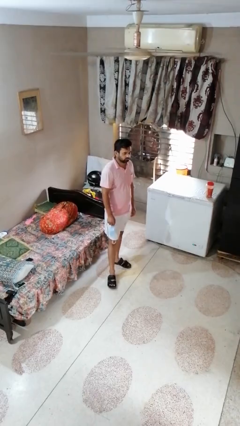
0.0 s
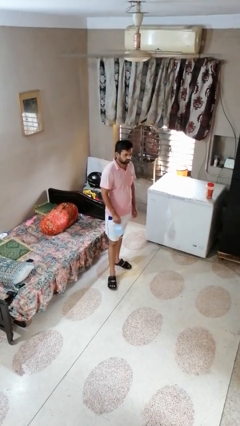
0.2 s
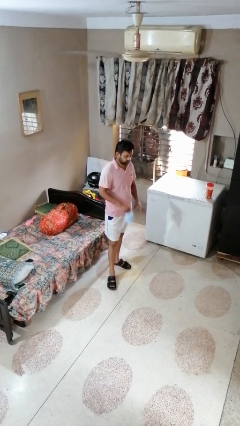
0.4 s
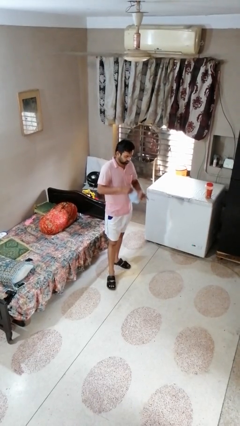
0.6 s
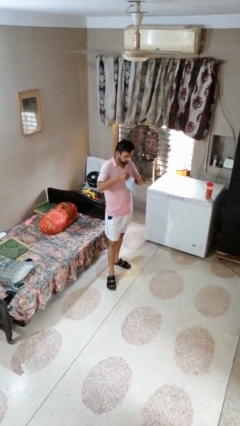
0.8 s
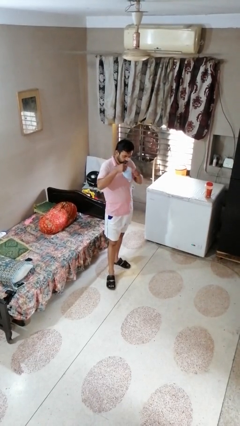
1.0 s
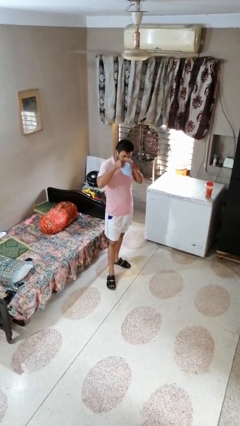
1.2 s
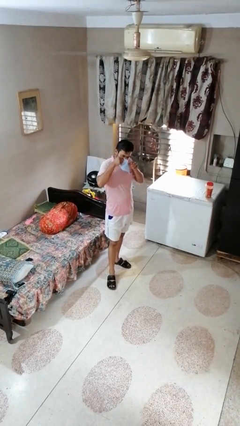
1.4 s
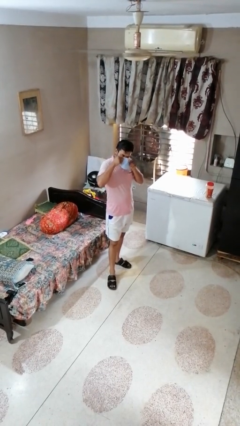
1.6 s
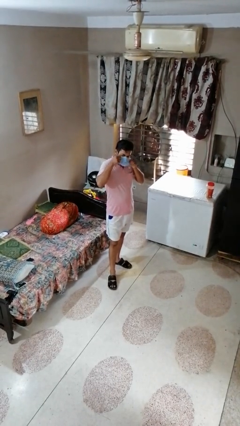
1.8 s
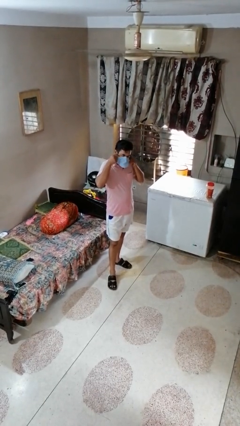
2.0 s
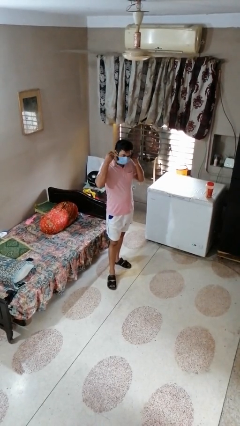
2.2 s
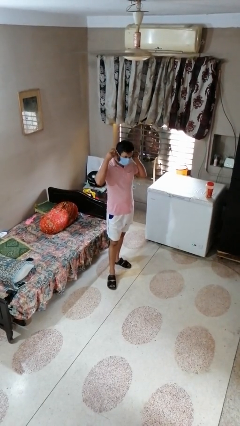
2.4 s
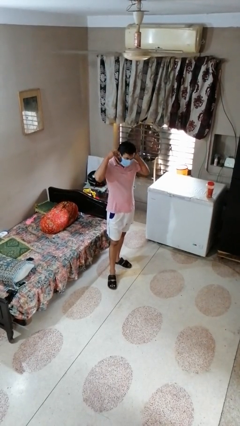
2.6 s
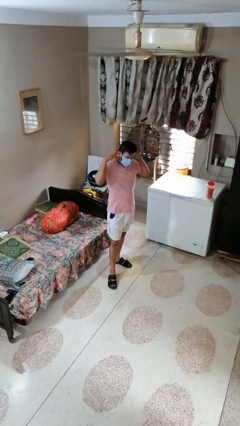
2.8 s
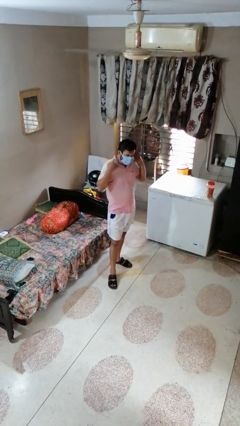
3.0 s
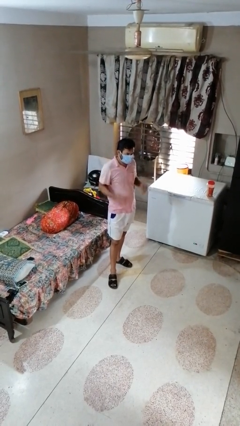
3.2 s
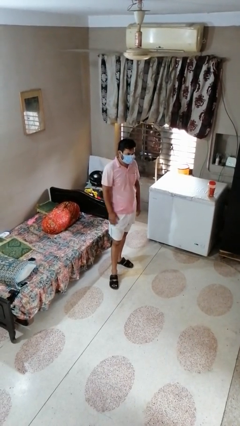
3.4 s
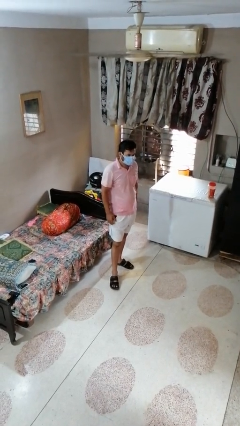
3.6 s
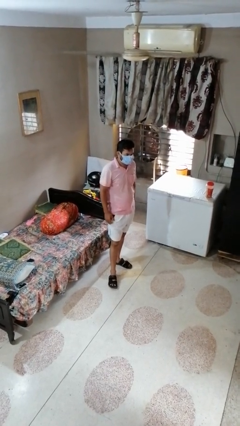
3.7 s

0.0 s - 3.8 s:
person puts on facemask

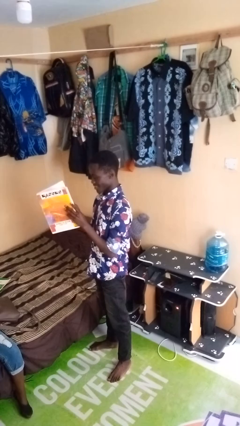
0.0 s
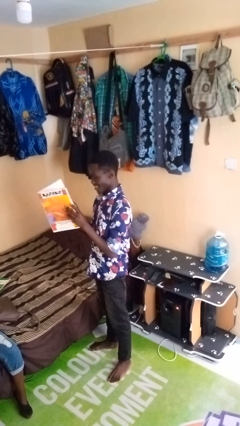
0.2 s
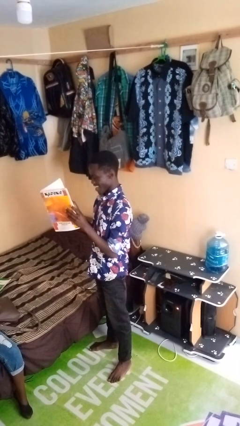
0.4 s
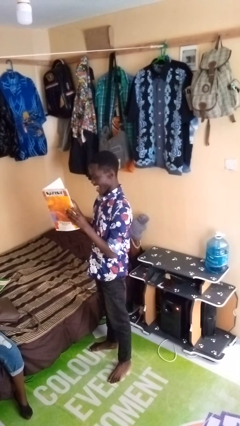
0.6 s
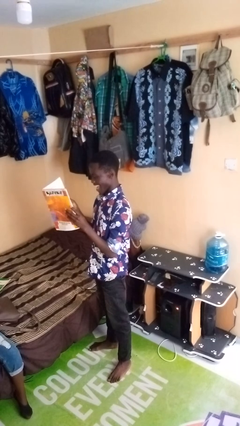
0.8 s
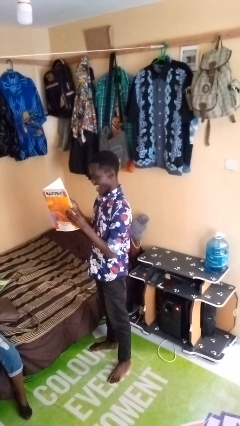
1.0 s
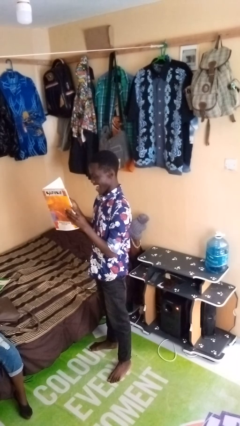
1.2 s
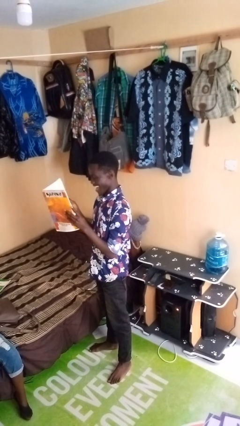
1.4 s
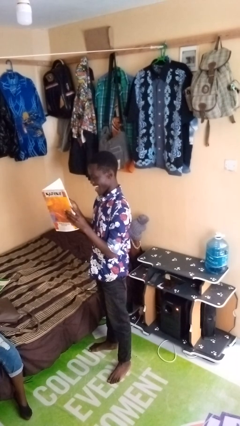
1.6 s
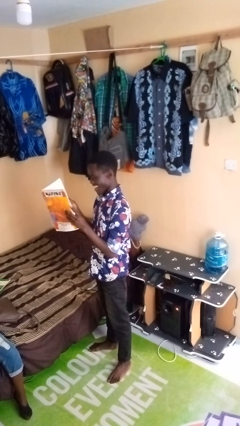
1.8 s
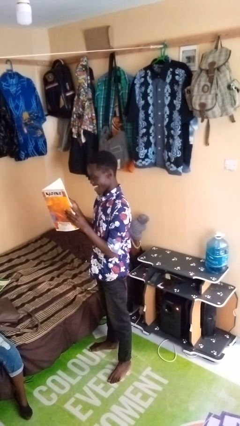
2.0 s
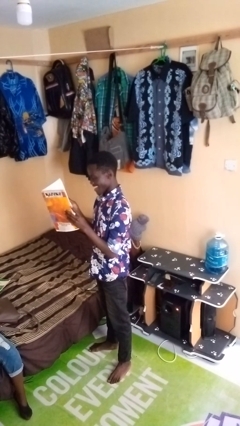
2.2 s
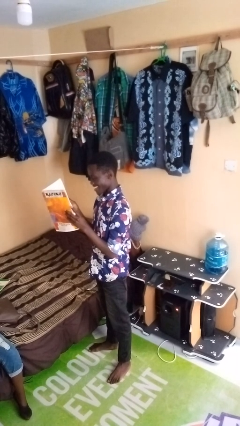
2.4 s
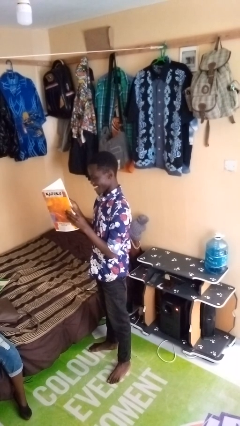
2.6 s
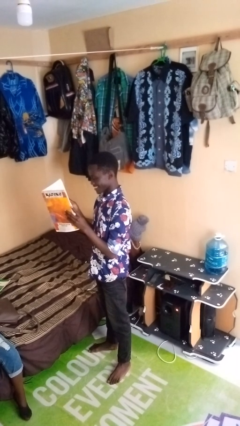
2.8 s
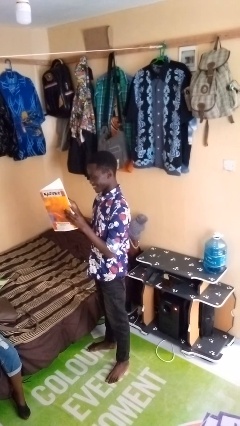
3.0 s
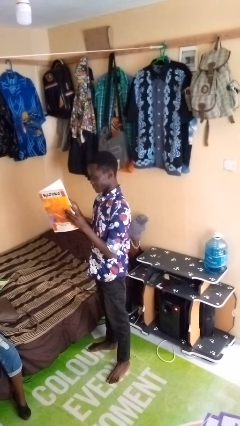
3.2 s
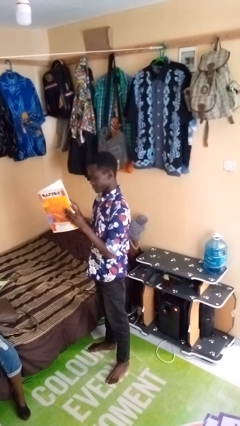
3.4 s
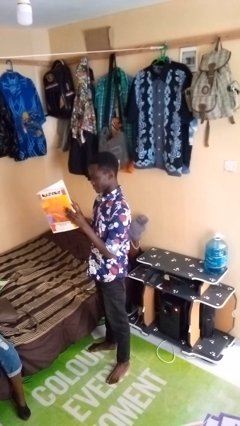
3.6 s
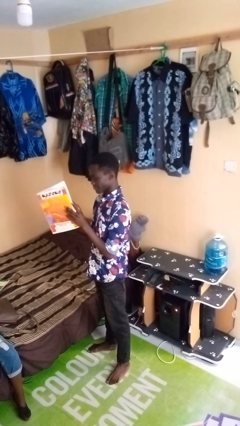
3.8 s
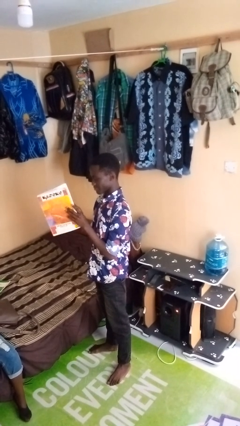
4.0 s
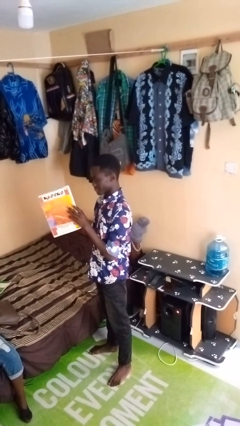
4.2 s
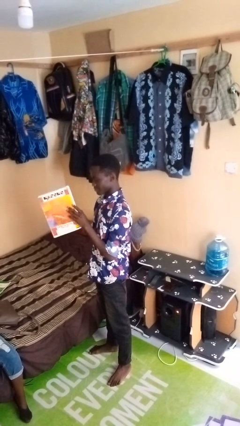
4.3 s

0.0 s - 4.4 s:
person reads newspaper

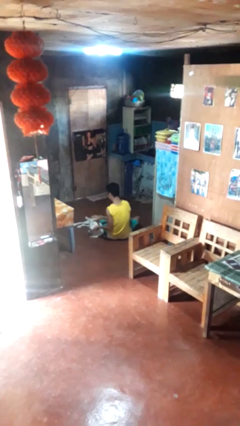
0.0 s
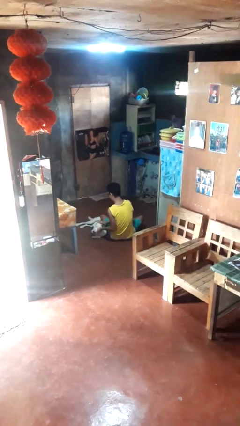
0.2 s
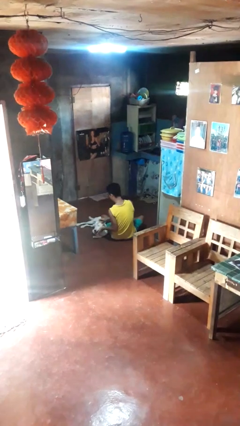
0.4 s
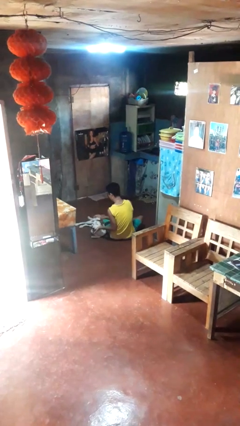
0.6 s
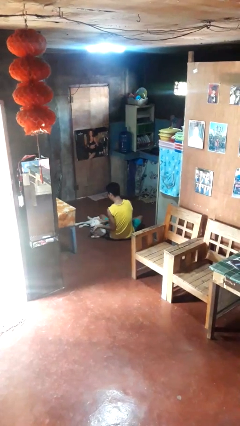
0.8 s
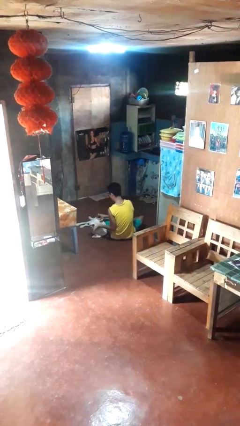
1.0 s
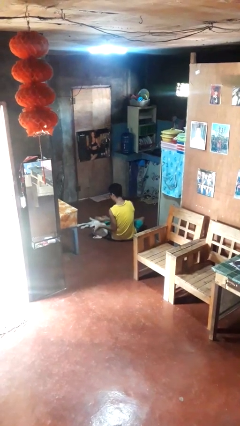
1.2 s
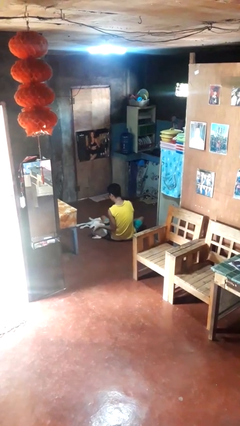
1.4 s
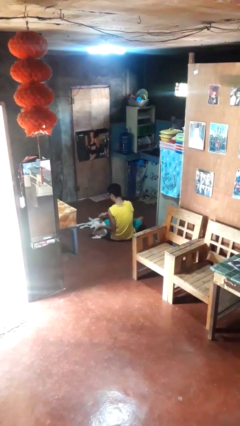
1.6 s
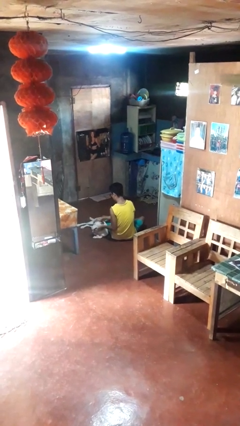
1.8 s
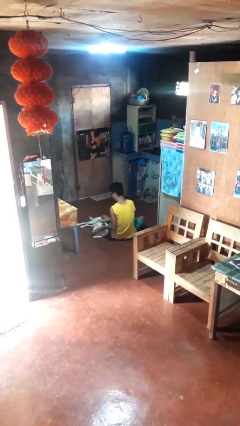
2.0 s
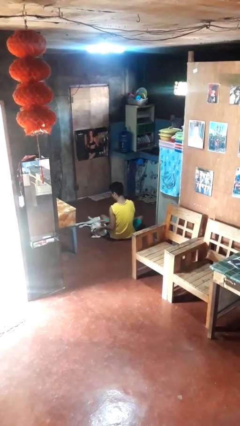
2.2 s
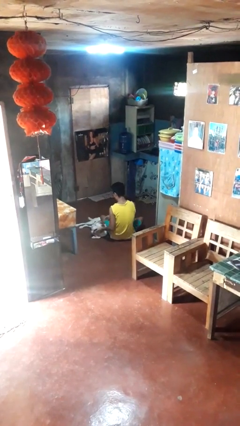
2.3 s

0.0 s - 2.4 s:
person pets dog

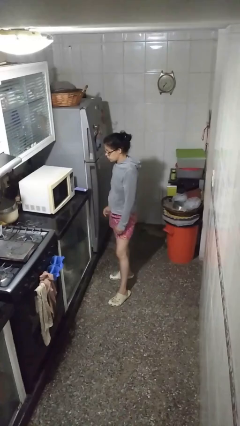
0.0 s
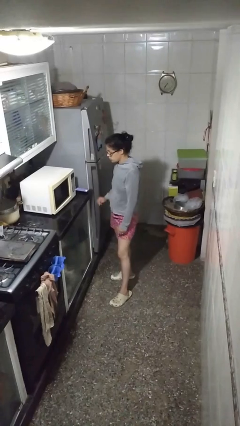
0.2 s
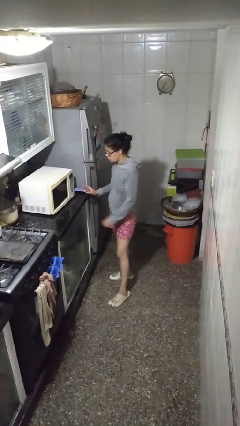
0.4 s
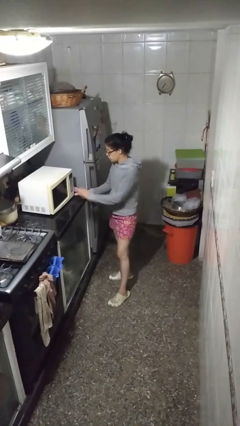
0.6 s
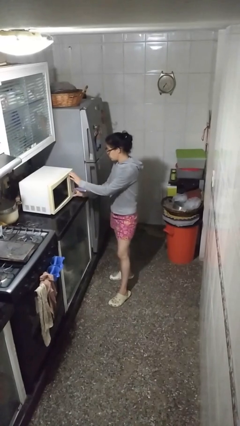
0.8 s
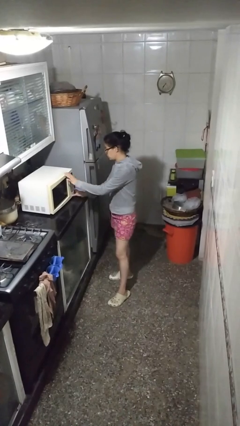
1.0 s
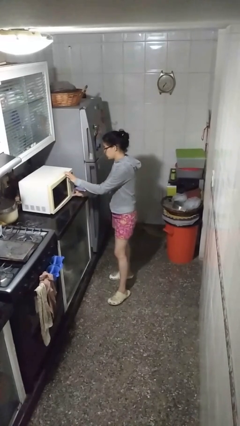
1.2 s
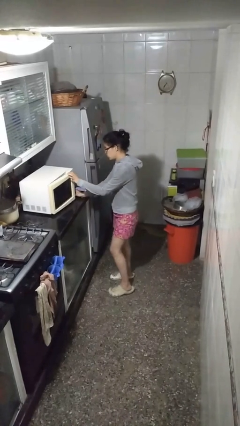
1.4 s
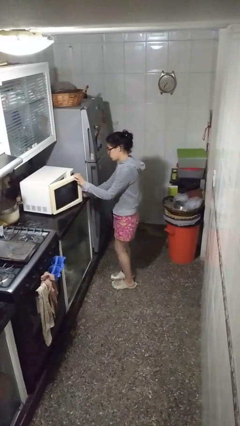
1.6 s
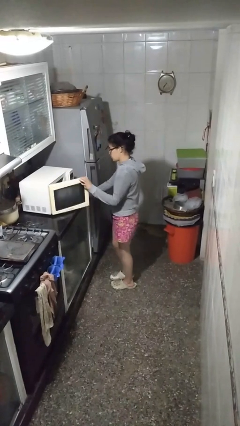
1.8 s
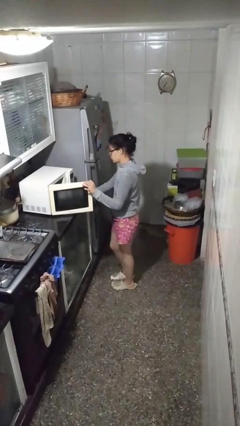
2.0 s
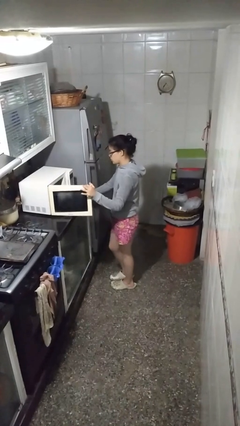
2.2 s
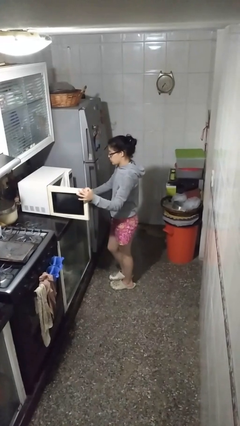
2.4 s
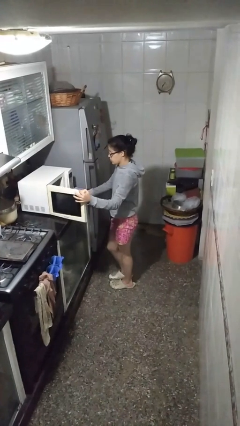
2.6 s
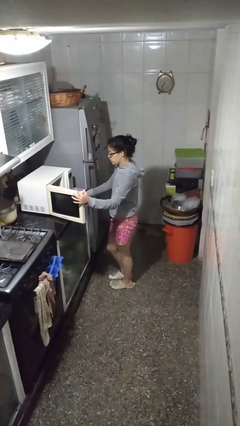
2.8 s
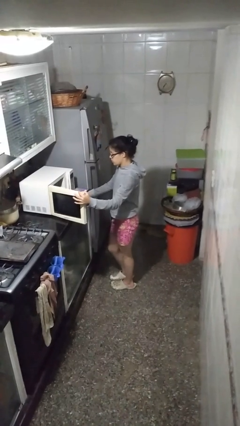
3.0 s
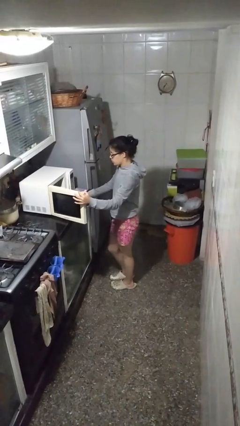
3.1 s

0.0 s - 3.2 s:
person opens microwave

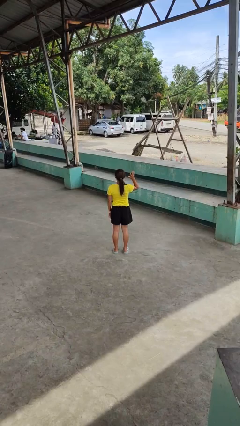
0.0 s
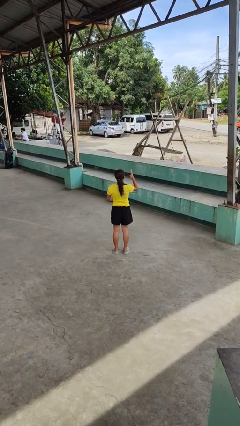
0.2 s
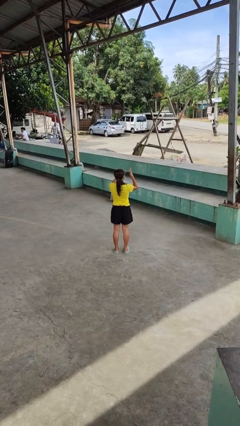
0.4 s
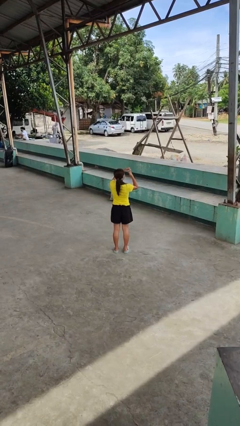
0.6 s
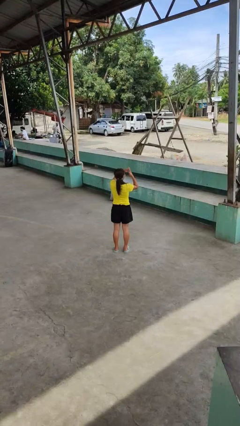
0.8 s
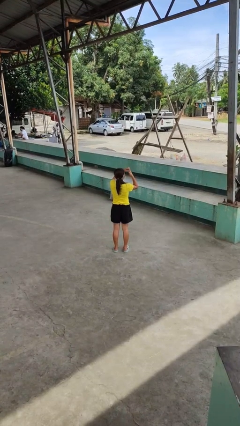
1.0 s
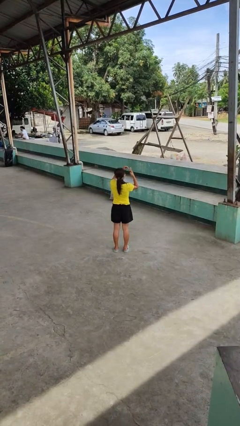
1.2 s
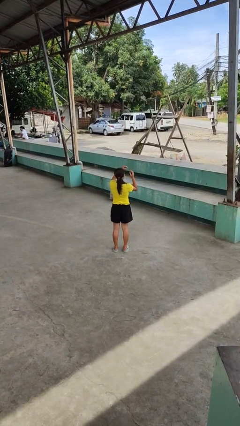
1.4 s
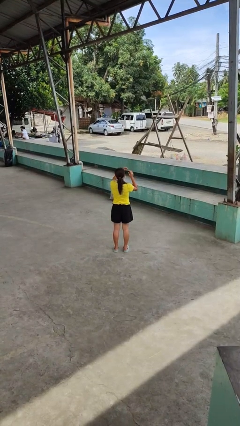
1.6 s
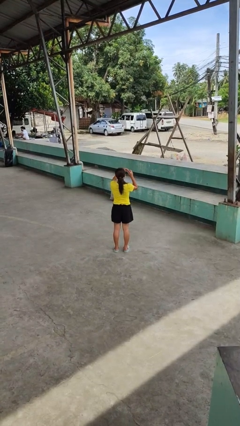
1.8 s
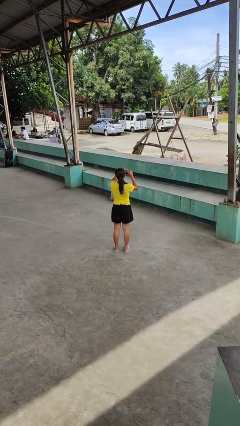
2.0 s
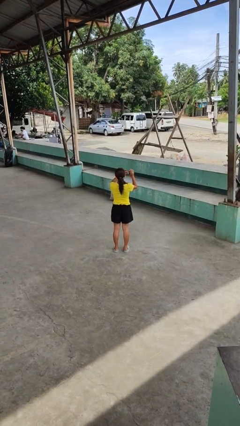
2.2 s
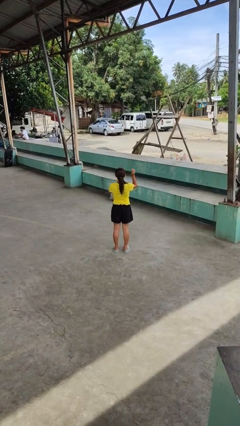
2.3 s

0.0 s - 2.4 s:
person takes off ring

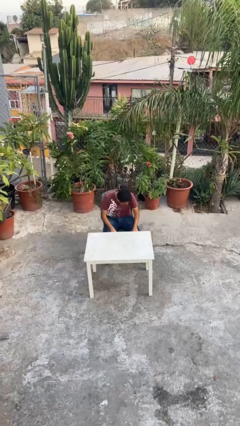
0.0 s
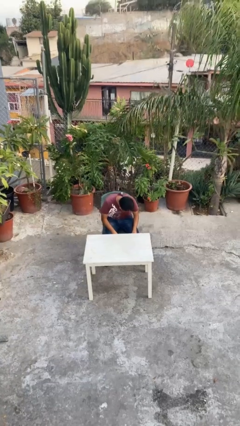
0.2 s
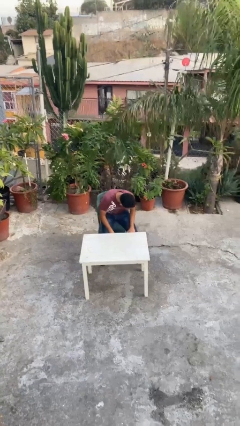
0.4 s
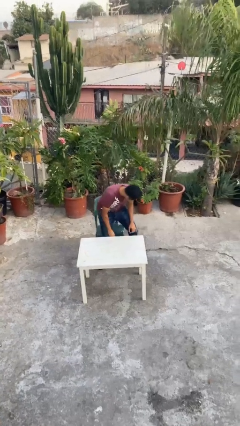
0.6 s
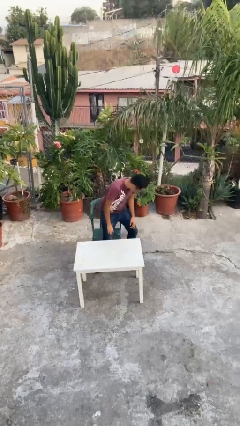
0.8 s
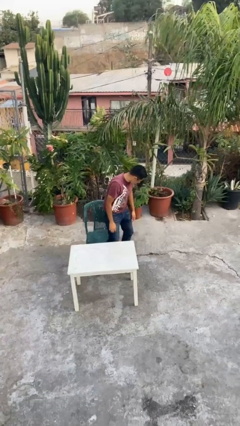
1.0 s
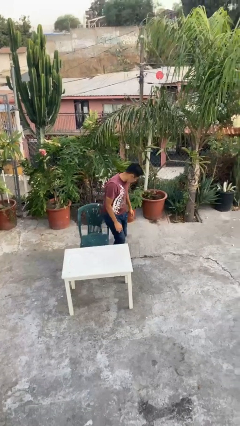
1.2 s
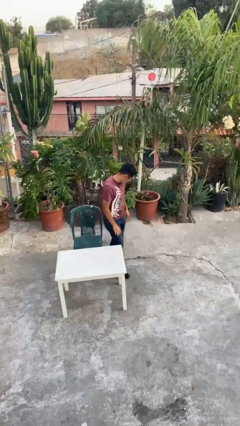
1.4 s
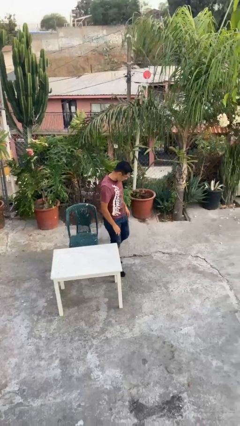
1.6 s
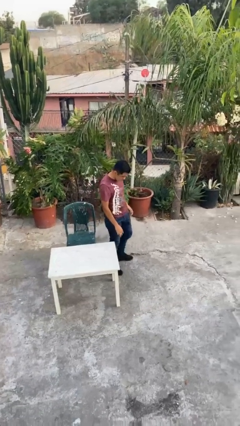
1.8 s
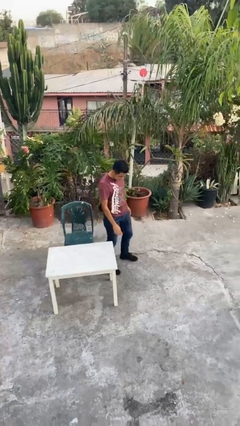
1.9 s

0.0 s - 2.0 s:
person stands up
